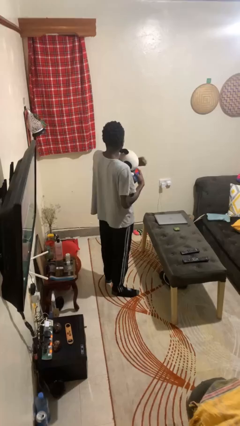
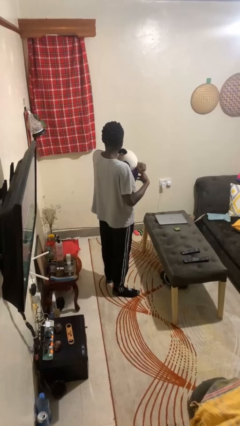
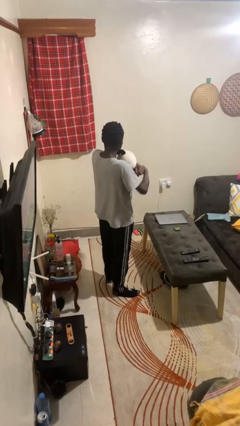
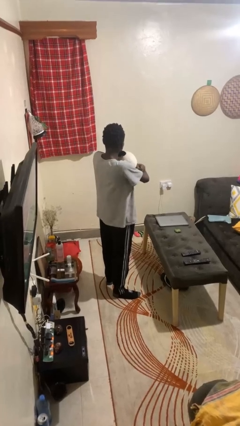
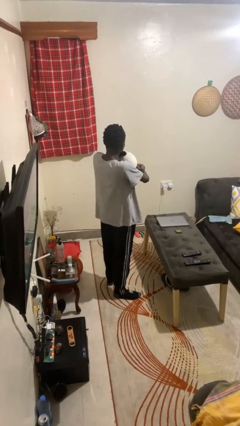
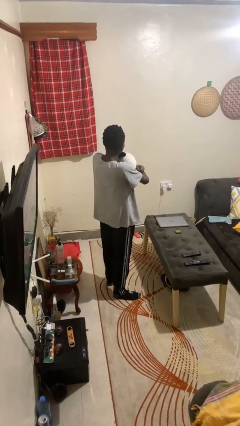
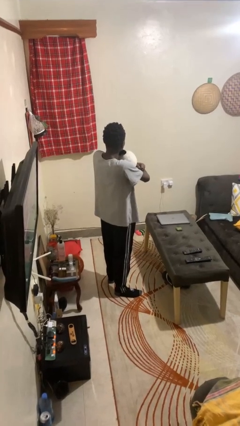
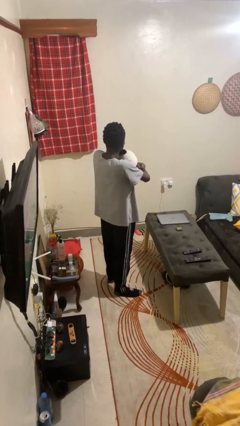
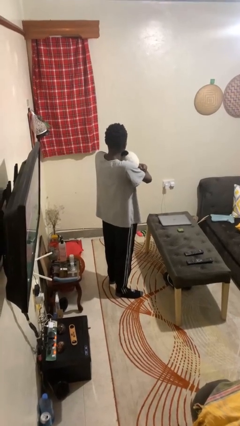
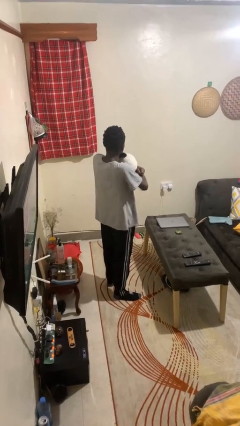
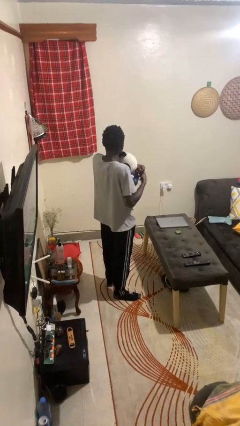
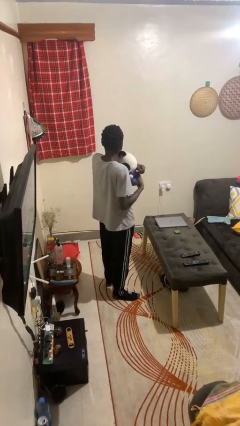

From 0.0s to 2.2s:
person hugs stuffed animal

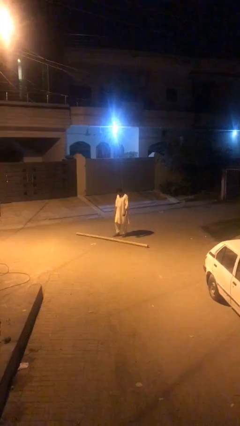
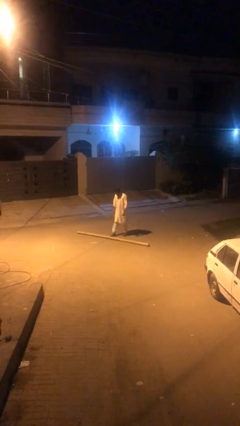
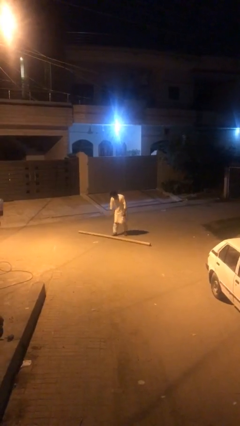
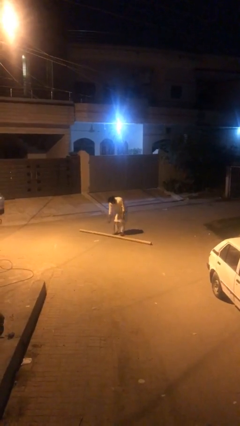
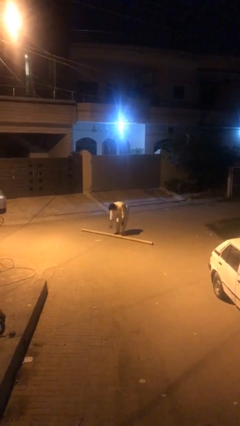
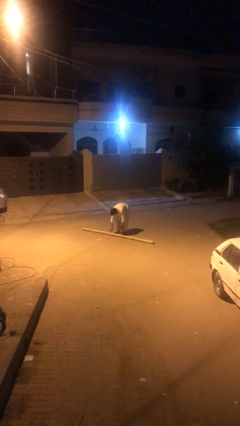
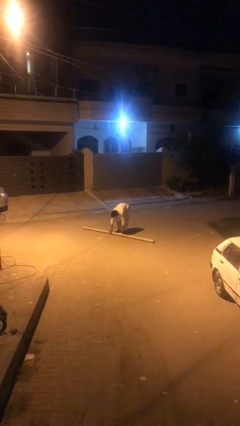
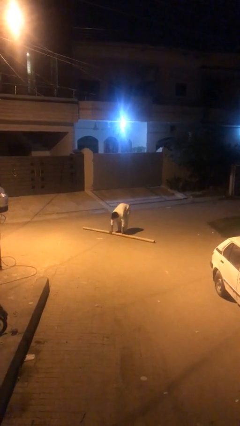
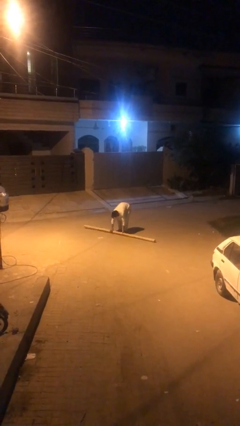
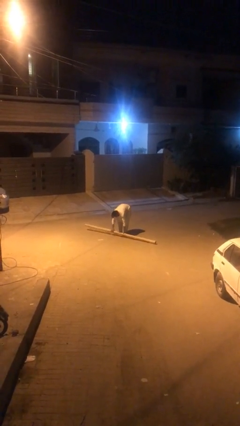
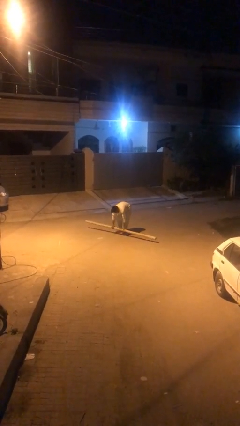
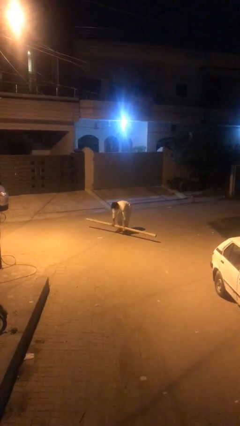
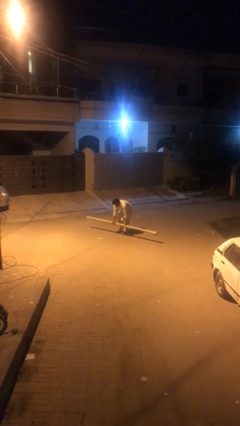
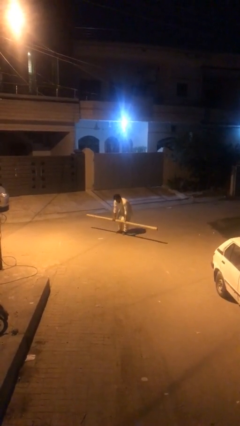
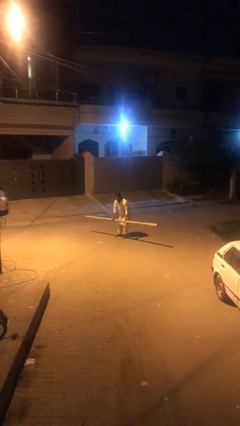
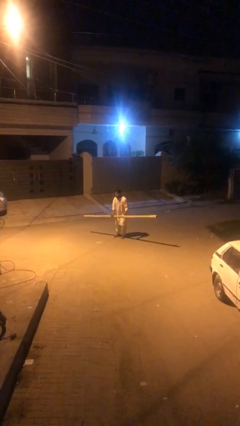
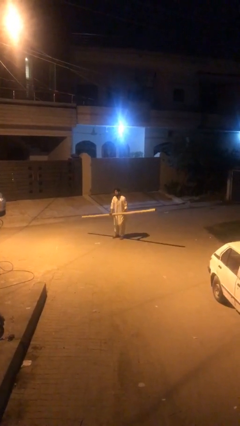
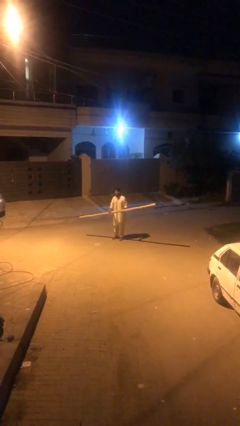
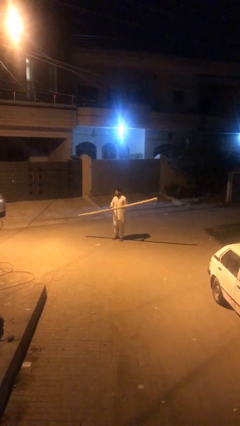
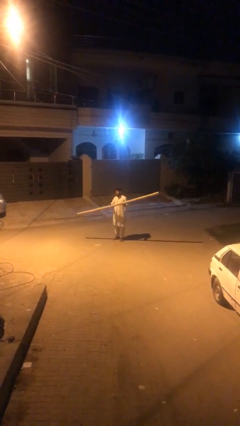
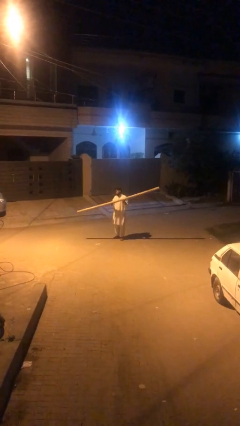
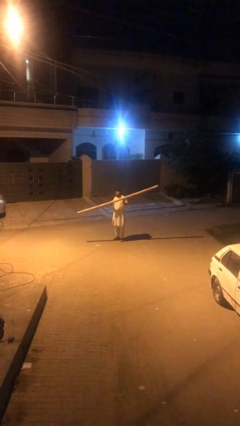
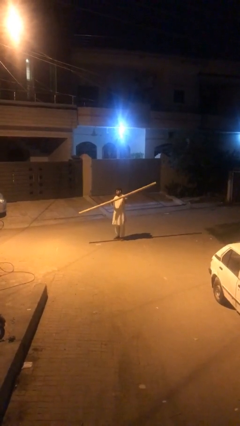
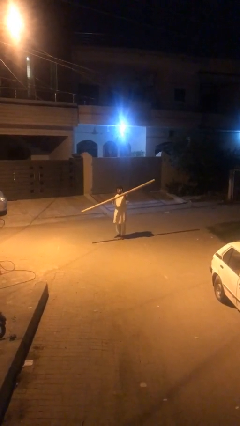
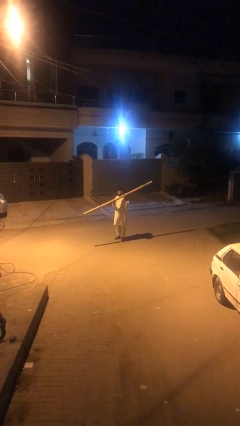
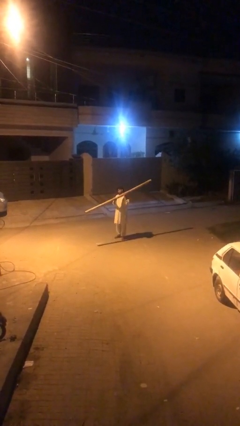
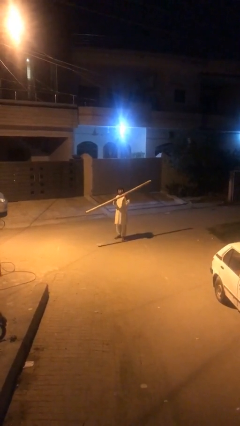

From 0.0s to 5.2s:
person picks up object from floor

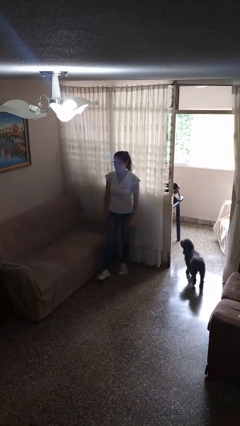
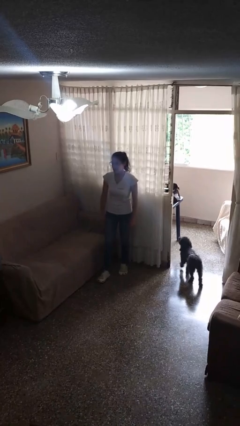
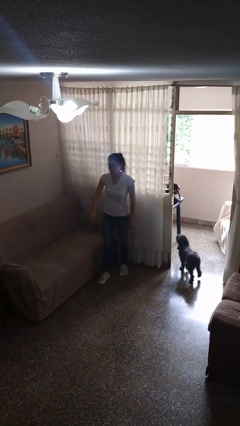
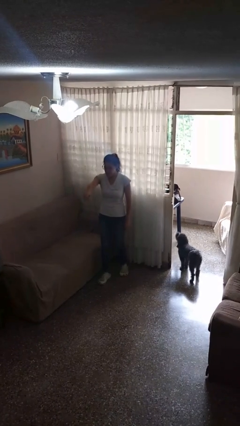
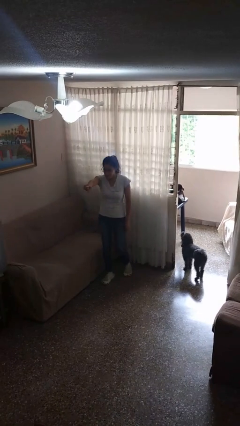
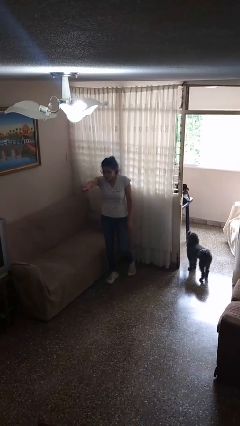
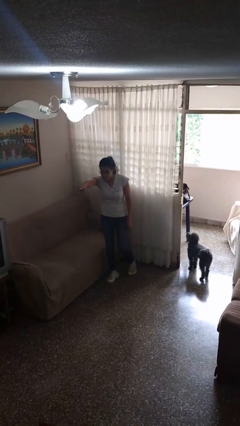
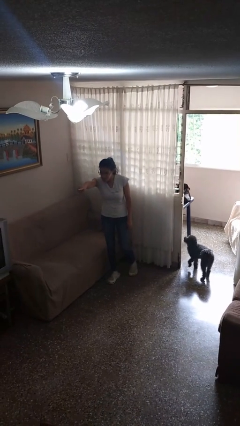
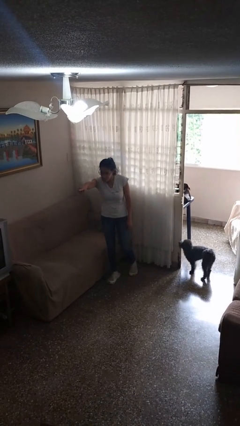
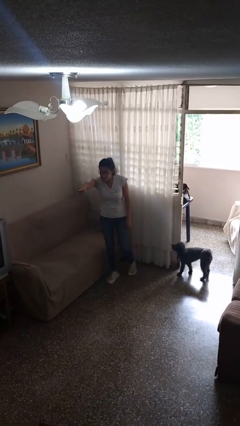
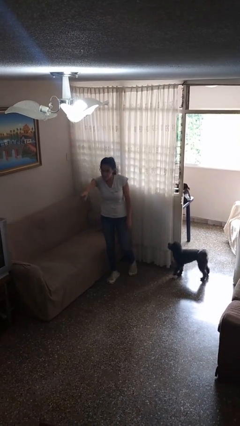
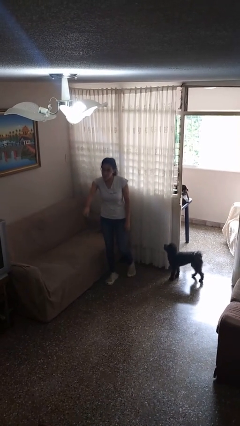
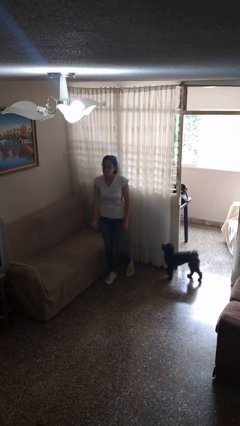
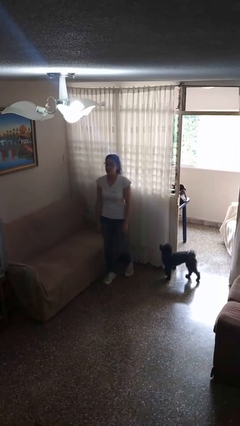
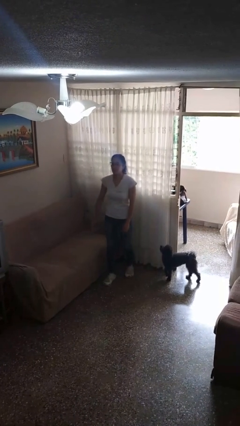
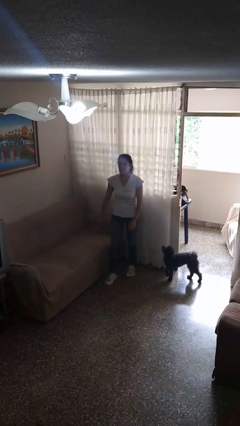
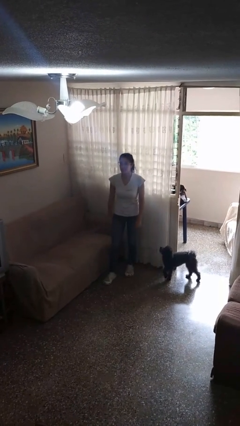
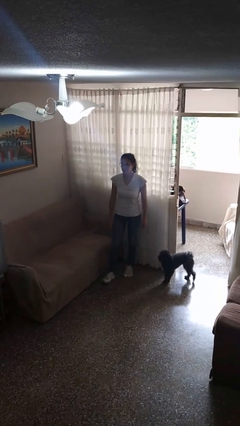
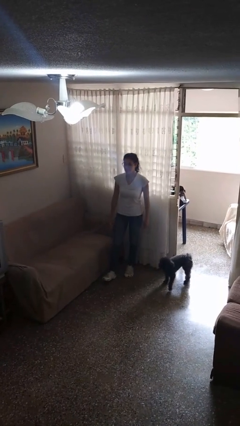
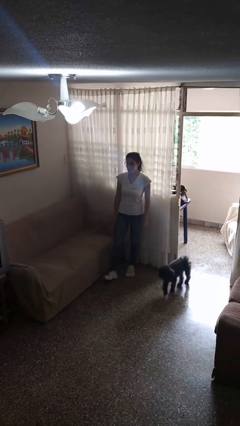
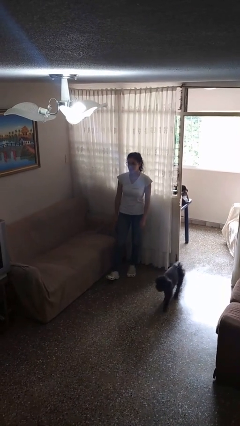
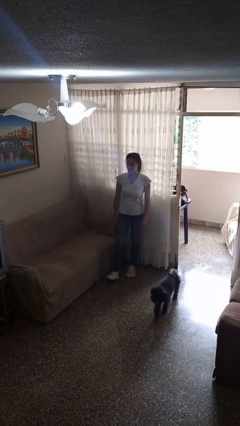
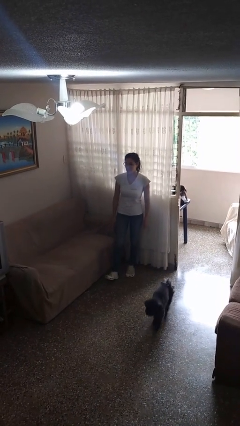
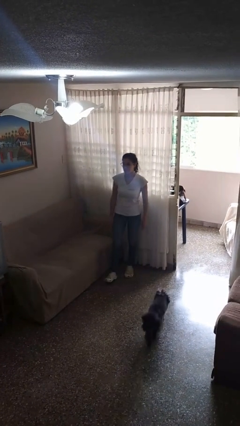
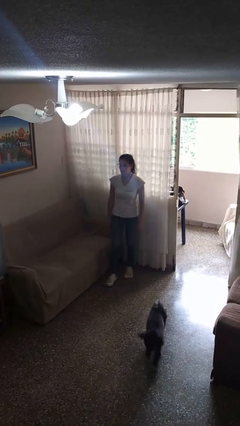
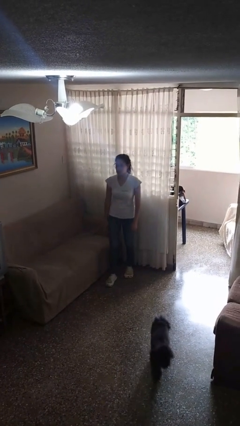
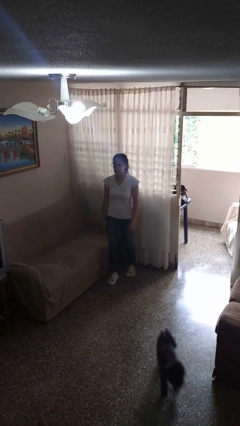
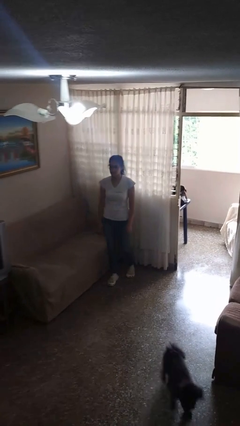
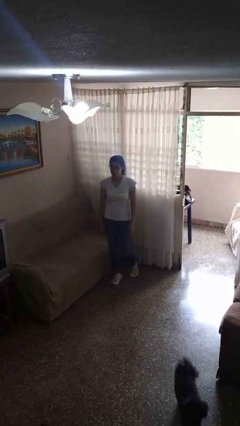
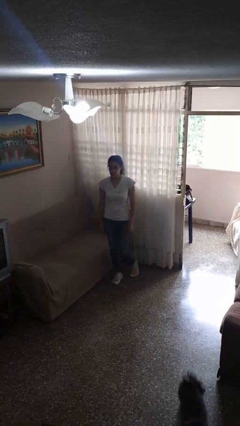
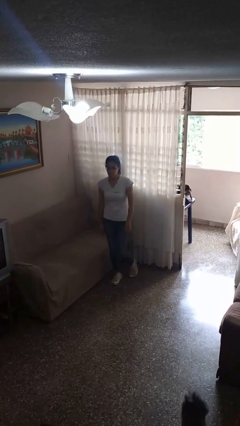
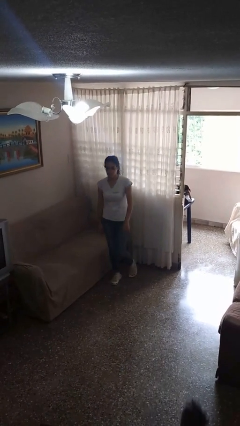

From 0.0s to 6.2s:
person points at person

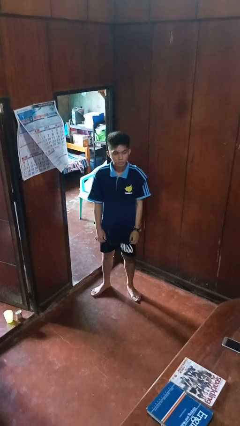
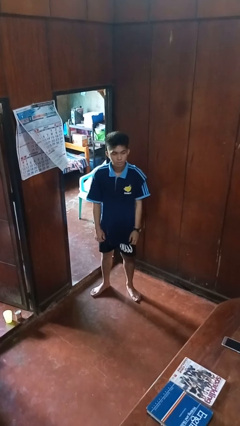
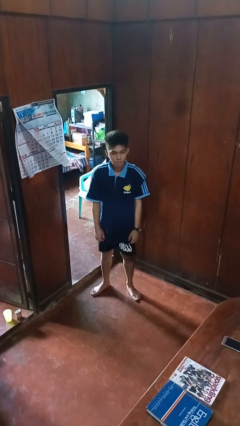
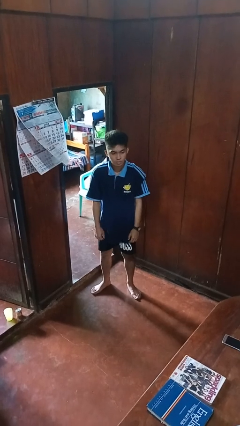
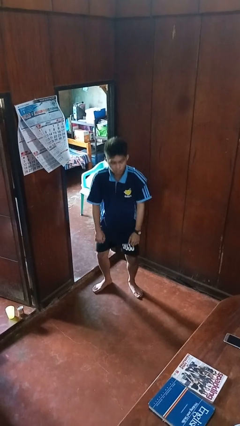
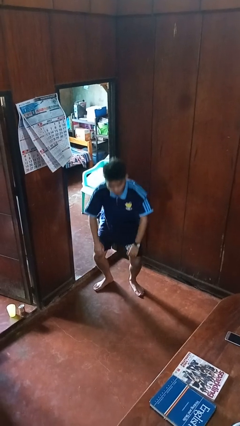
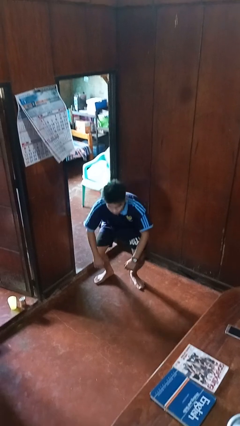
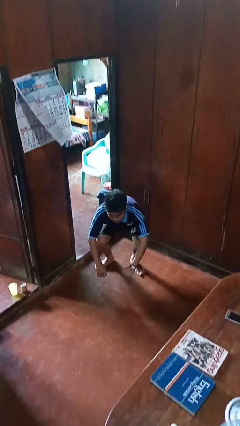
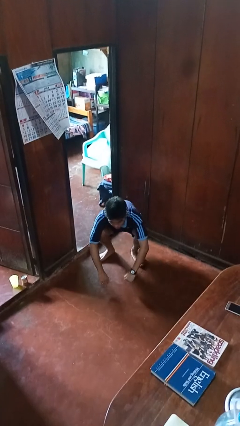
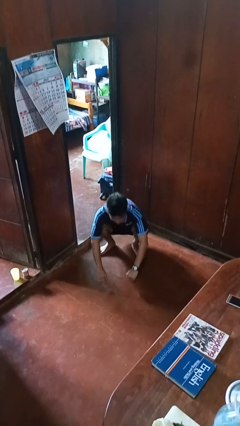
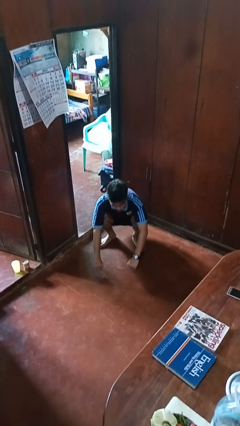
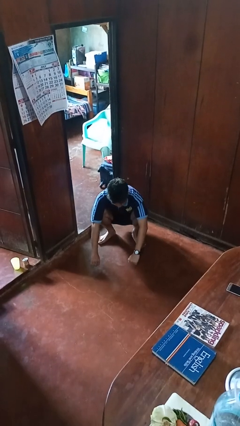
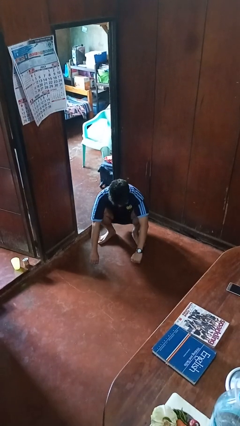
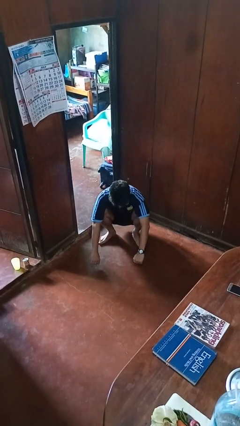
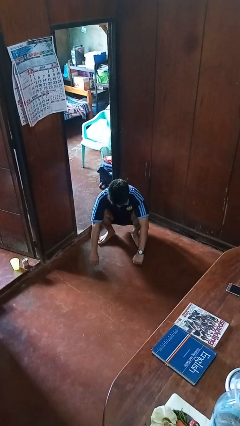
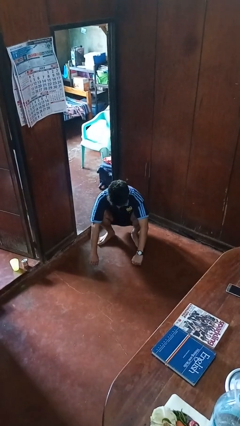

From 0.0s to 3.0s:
person squats

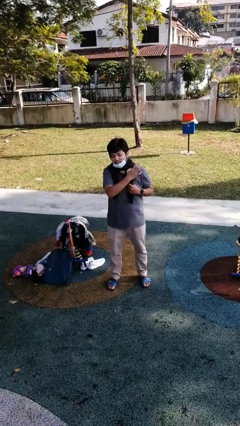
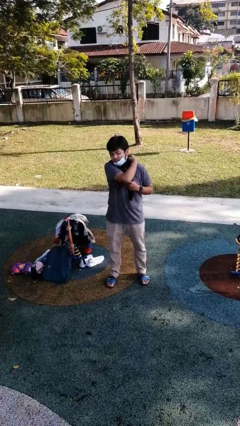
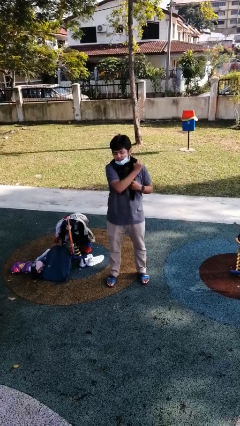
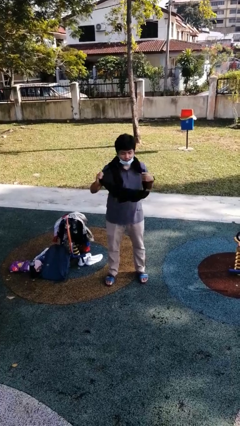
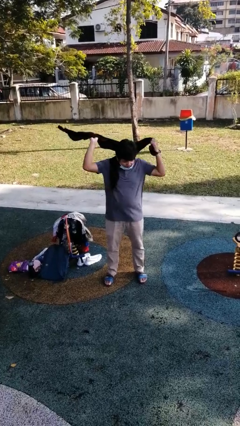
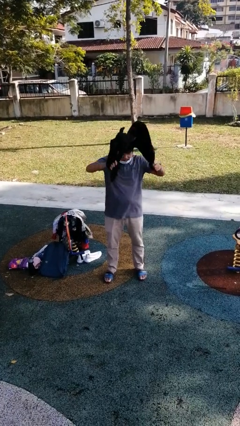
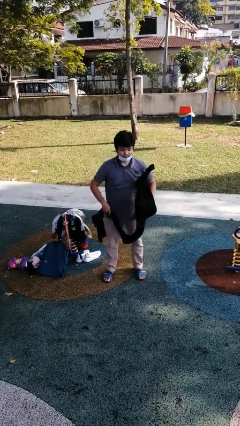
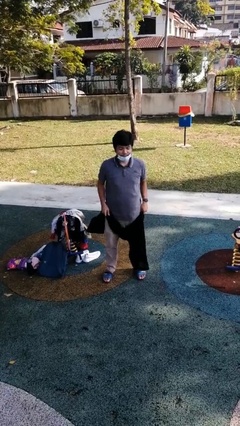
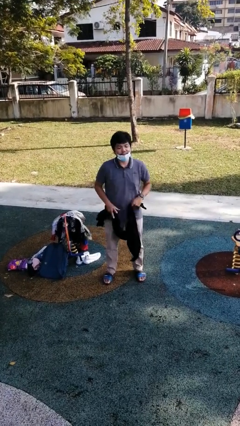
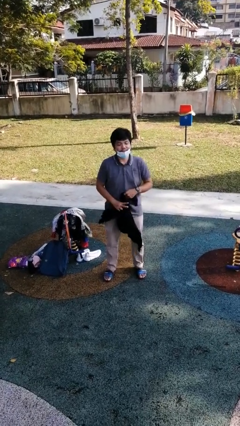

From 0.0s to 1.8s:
person takes off scarf
